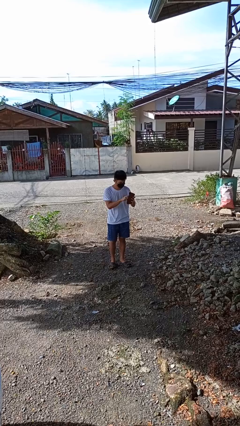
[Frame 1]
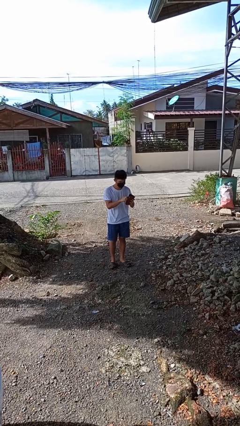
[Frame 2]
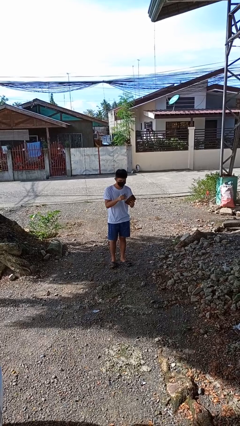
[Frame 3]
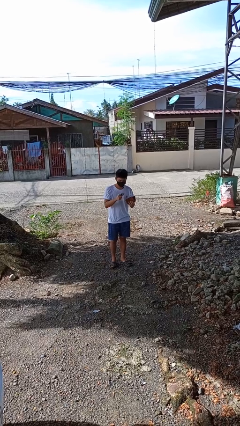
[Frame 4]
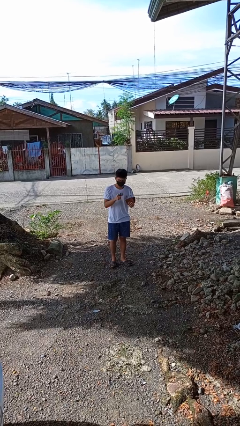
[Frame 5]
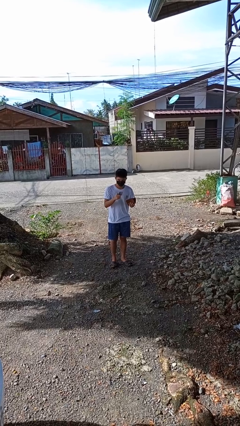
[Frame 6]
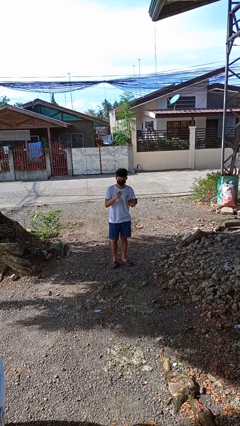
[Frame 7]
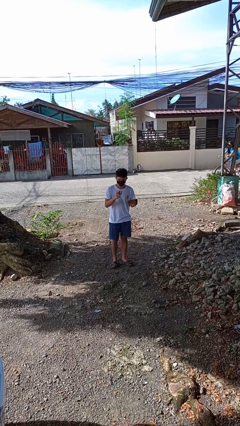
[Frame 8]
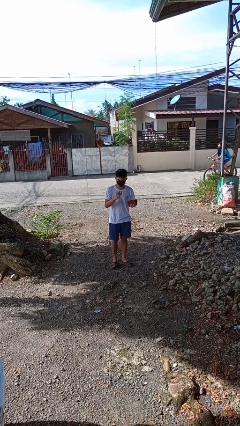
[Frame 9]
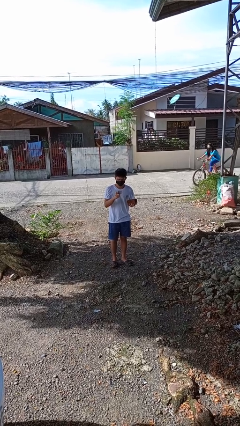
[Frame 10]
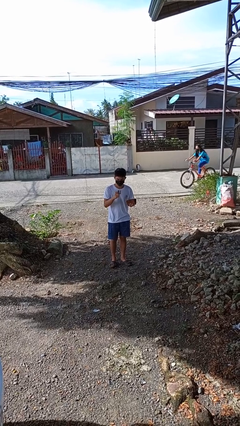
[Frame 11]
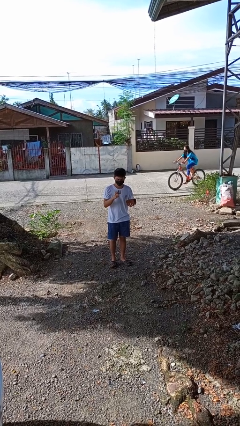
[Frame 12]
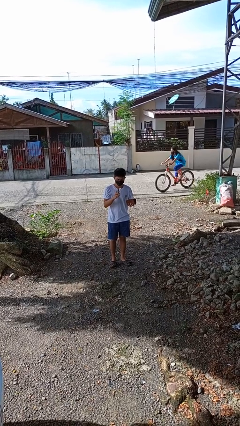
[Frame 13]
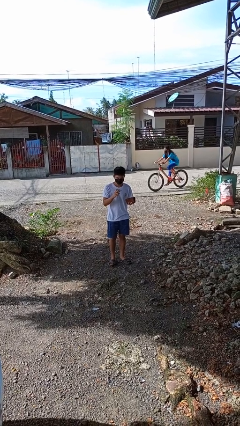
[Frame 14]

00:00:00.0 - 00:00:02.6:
person takes object from purse

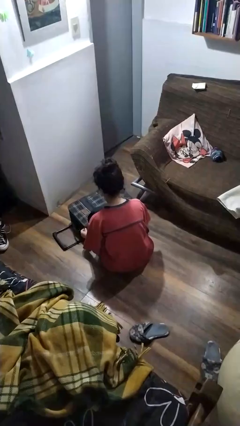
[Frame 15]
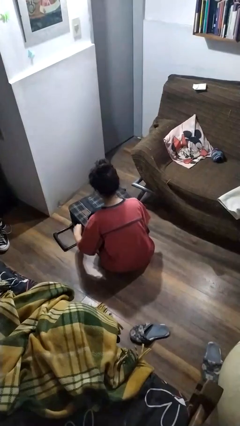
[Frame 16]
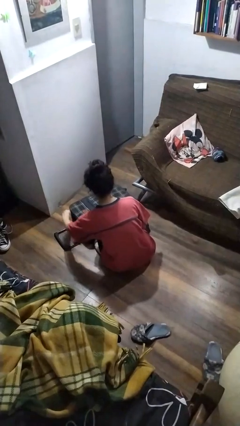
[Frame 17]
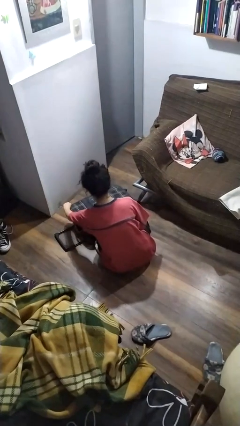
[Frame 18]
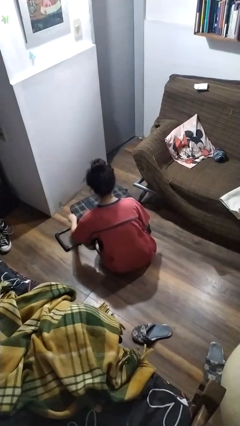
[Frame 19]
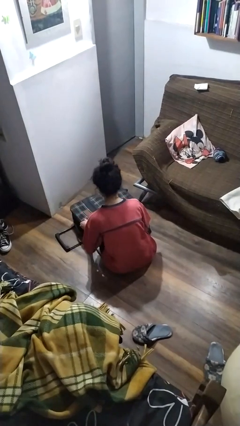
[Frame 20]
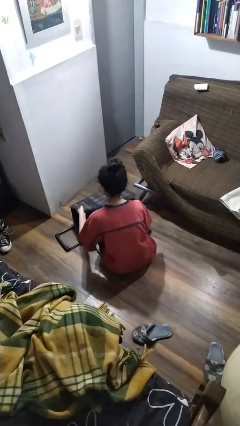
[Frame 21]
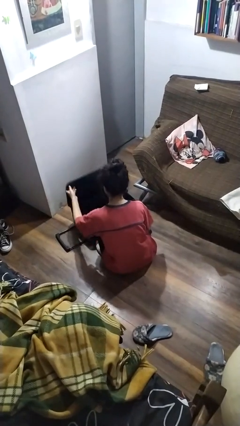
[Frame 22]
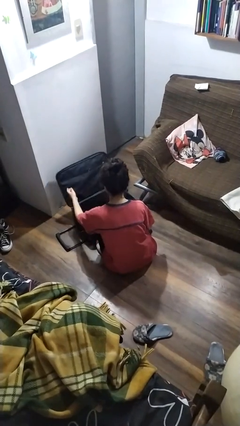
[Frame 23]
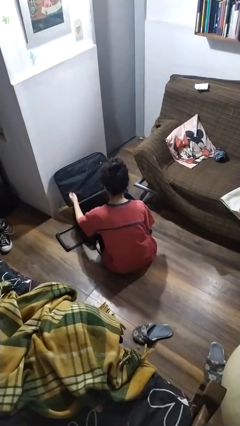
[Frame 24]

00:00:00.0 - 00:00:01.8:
person opens suitcase

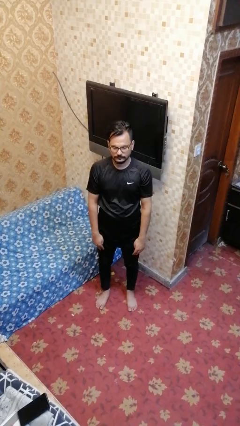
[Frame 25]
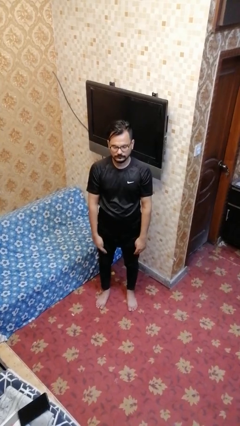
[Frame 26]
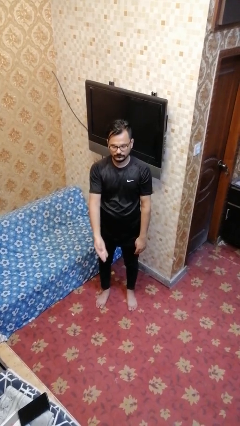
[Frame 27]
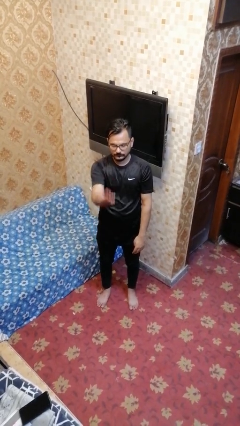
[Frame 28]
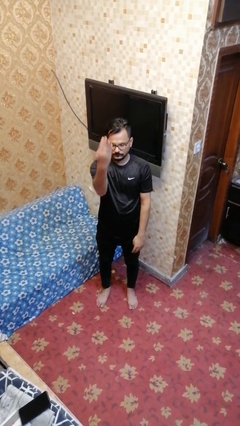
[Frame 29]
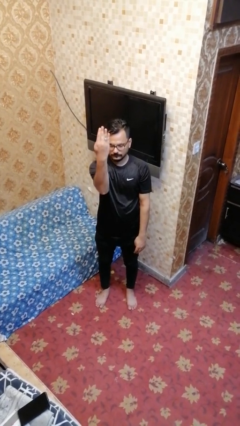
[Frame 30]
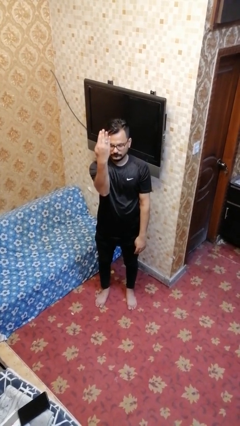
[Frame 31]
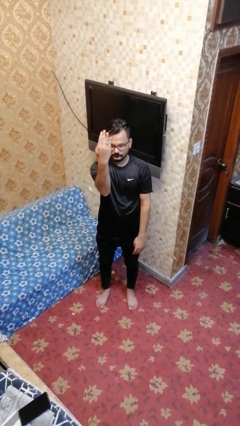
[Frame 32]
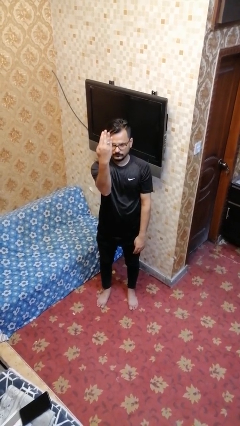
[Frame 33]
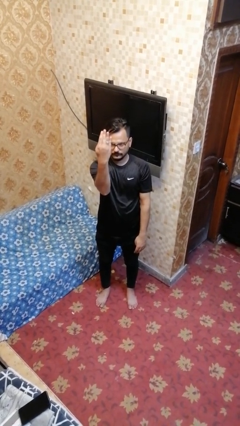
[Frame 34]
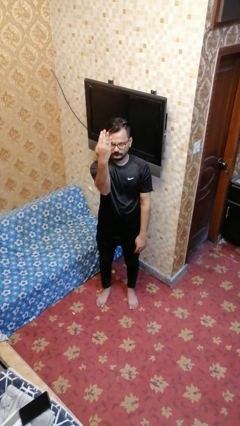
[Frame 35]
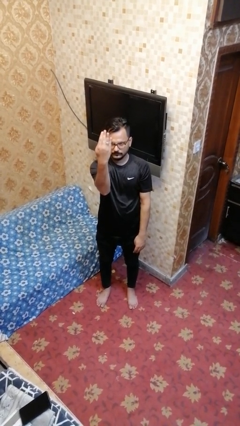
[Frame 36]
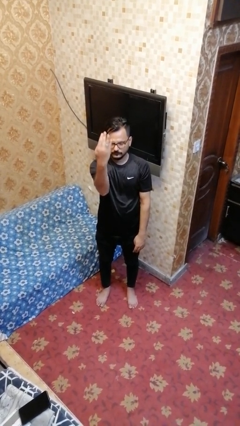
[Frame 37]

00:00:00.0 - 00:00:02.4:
person gestures number four

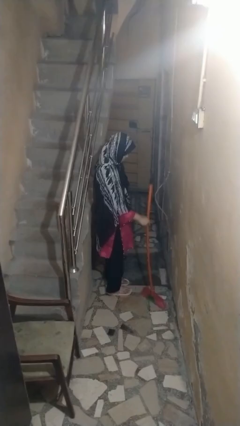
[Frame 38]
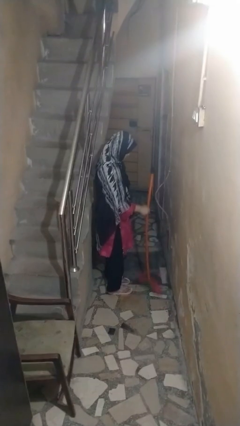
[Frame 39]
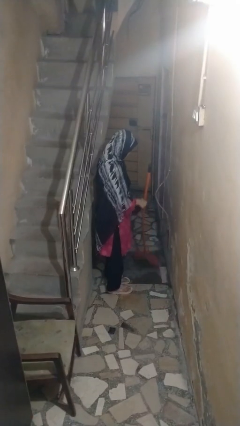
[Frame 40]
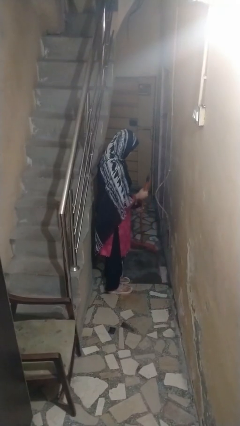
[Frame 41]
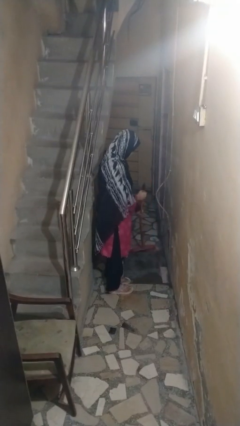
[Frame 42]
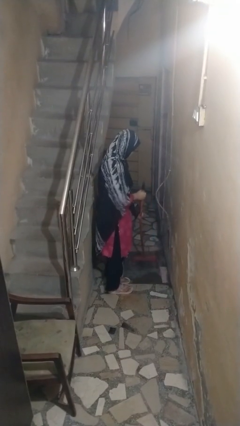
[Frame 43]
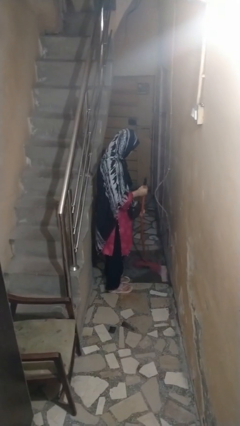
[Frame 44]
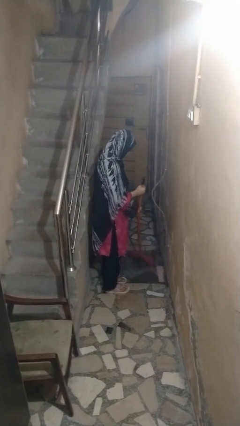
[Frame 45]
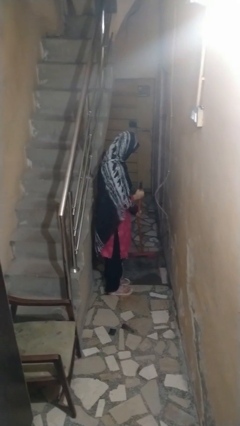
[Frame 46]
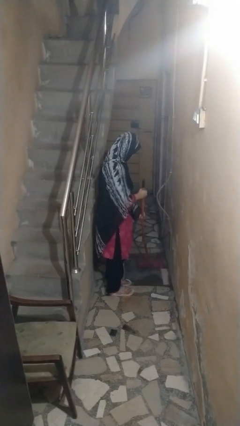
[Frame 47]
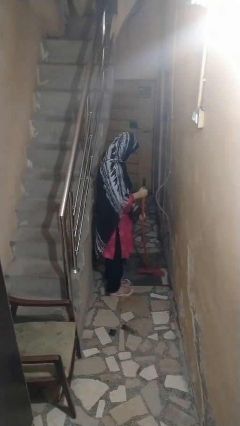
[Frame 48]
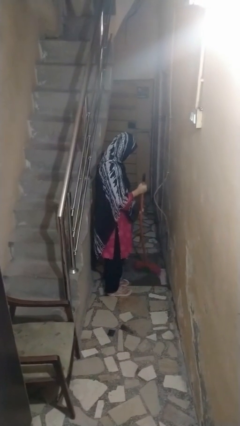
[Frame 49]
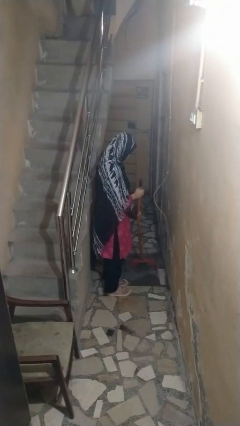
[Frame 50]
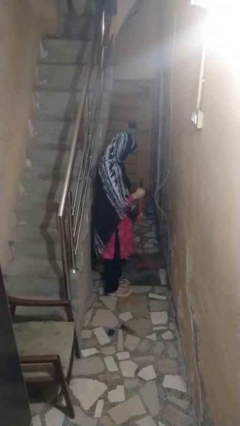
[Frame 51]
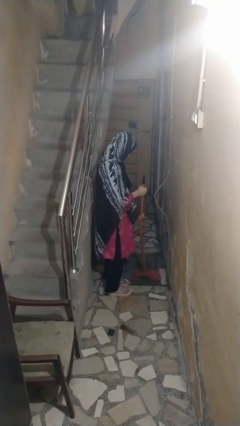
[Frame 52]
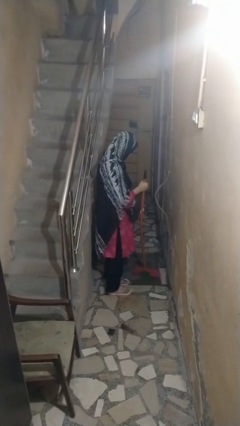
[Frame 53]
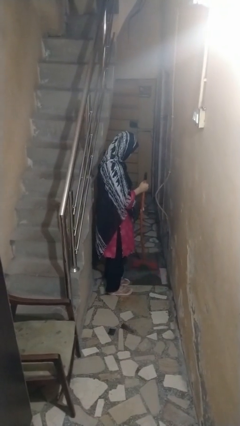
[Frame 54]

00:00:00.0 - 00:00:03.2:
person sweeps floor

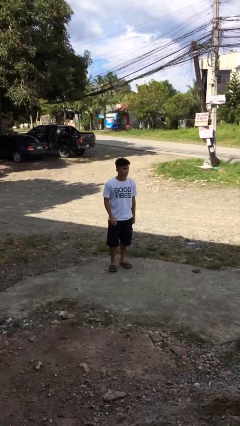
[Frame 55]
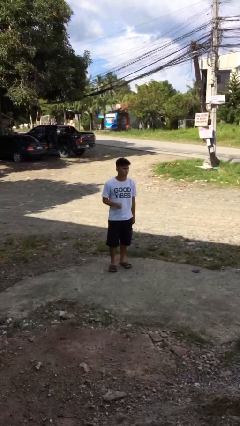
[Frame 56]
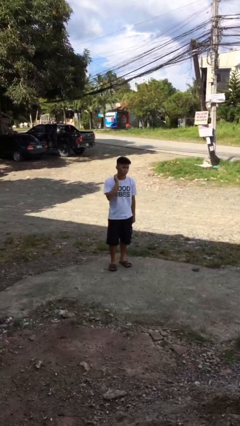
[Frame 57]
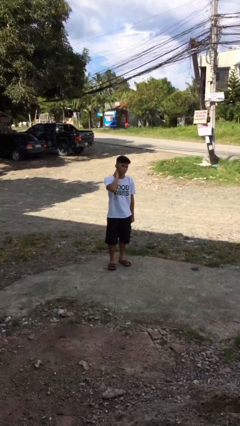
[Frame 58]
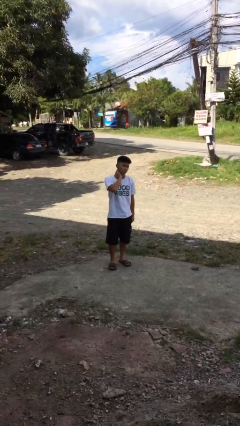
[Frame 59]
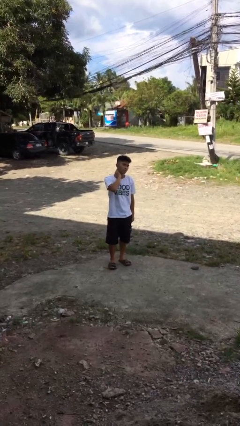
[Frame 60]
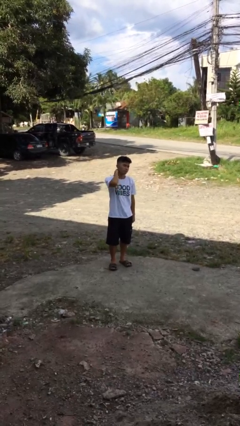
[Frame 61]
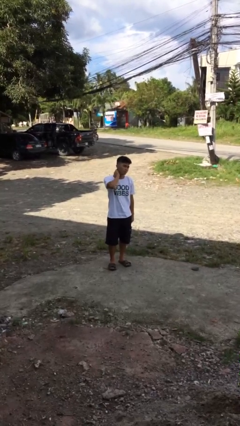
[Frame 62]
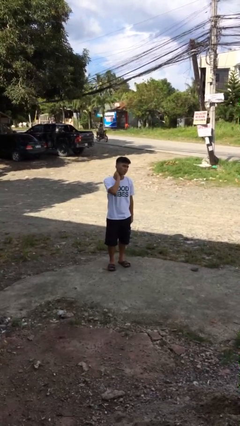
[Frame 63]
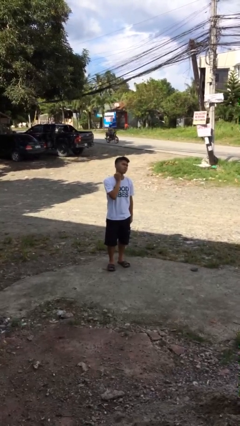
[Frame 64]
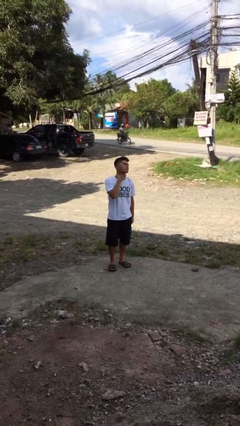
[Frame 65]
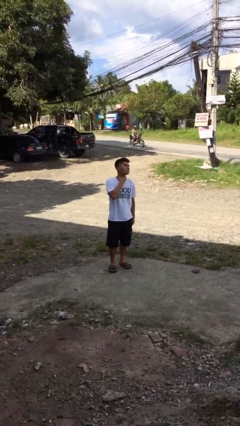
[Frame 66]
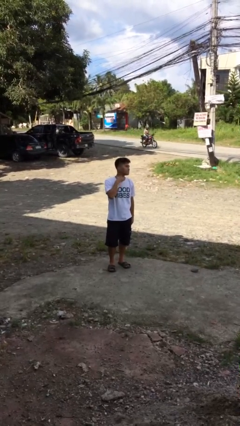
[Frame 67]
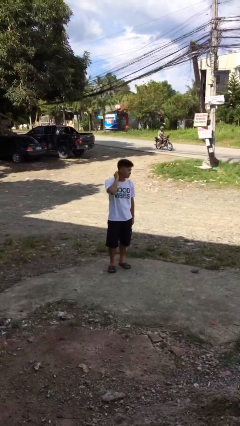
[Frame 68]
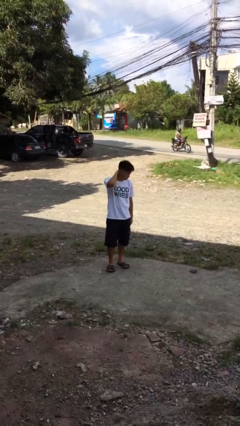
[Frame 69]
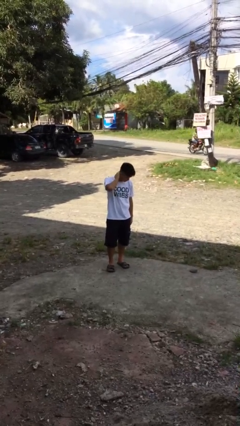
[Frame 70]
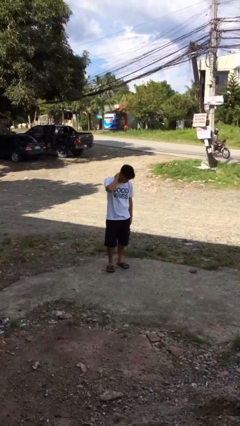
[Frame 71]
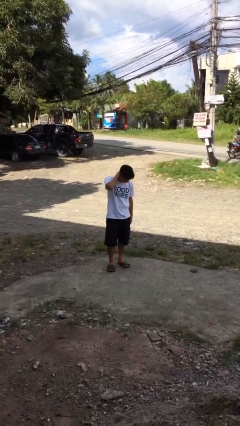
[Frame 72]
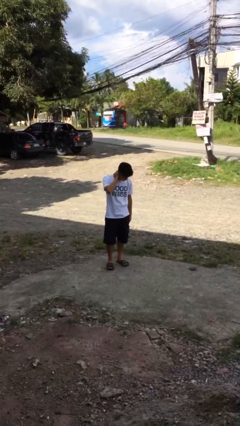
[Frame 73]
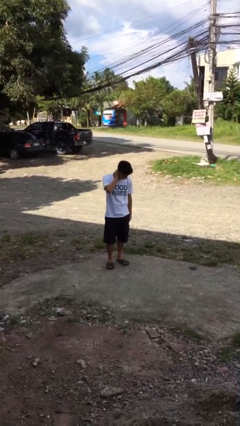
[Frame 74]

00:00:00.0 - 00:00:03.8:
person rubs neck

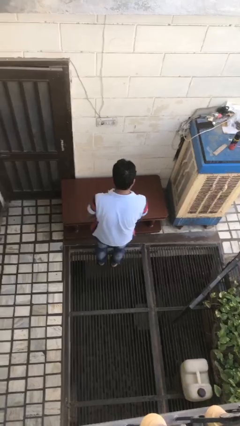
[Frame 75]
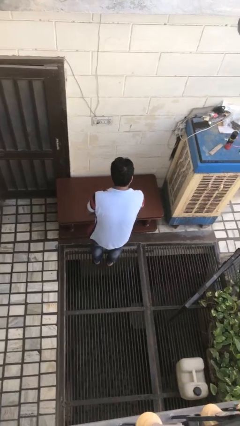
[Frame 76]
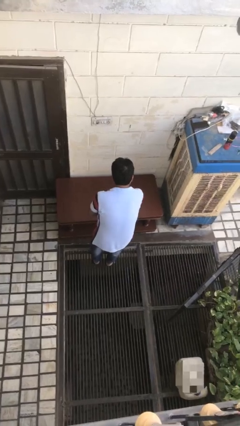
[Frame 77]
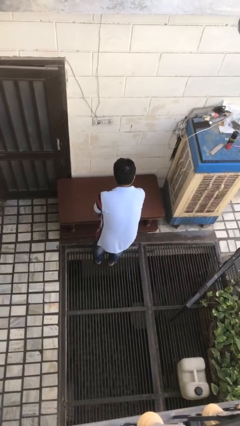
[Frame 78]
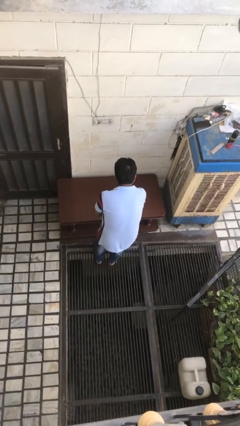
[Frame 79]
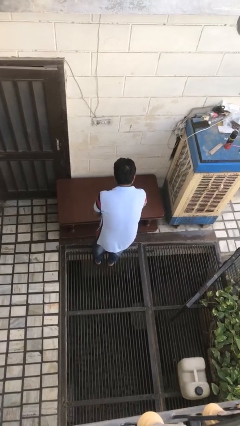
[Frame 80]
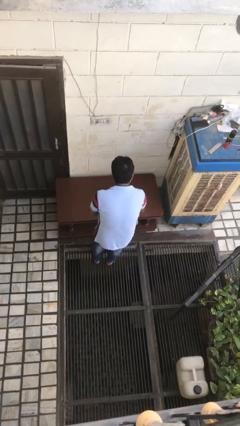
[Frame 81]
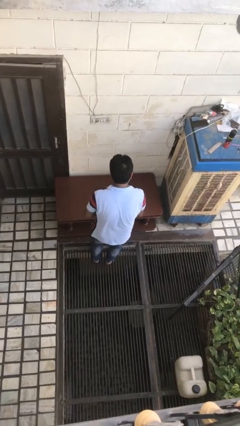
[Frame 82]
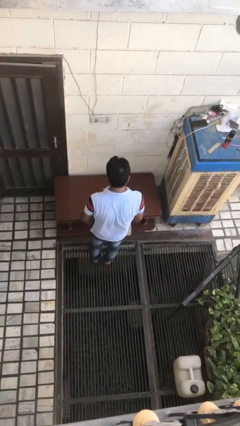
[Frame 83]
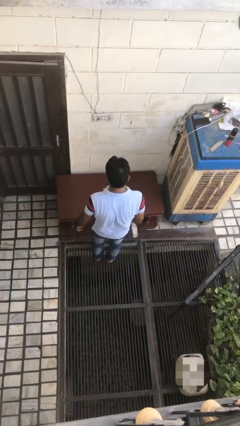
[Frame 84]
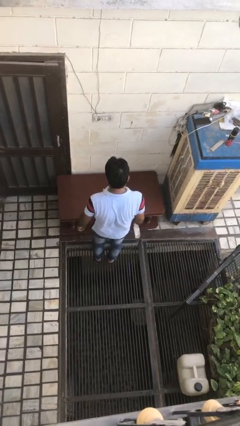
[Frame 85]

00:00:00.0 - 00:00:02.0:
person sprays from bottle

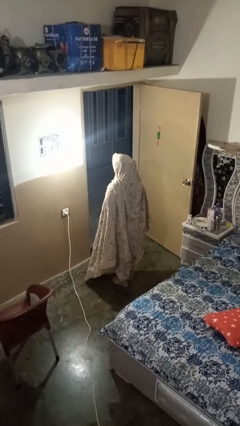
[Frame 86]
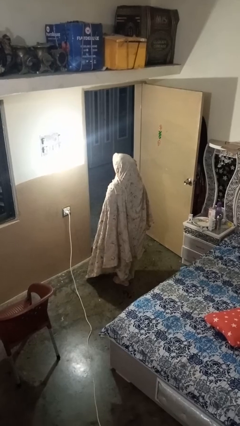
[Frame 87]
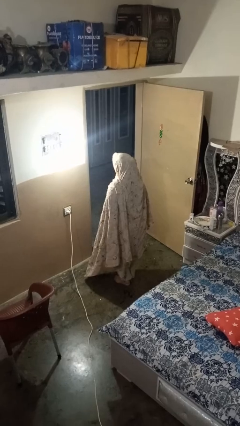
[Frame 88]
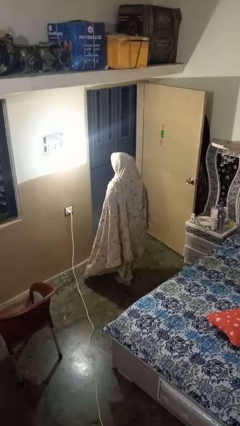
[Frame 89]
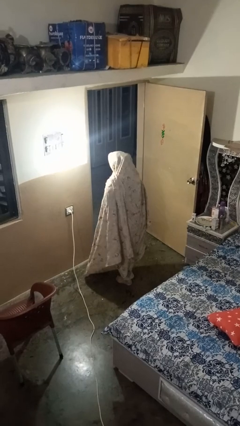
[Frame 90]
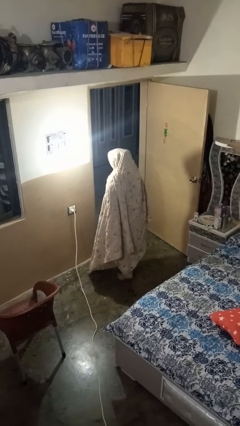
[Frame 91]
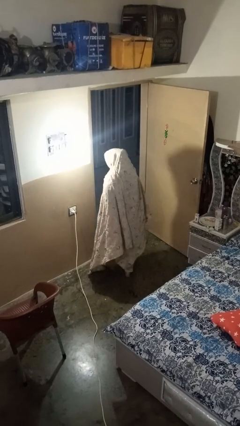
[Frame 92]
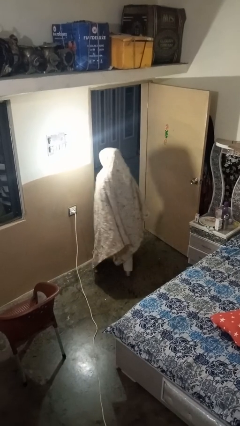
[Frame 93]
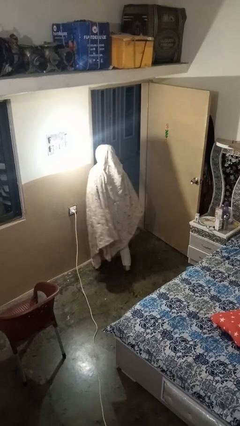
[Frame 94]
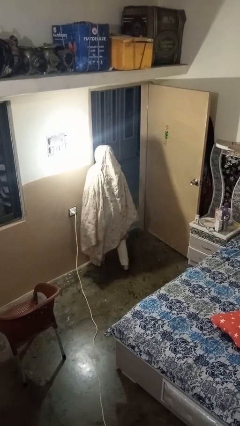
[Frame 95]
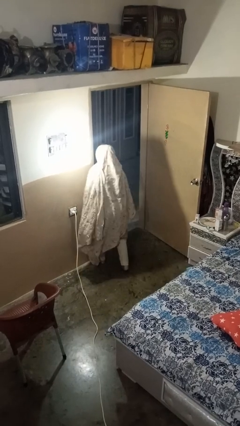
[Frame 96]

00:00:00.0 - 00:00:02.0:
person bumps into wall
